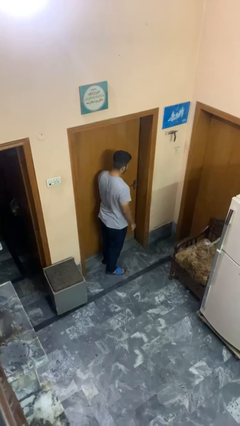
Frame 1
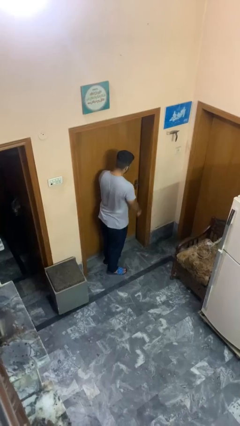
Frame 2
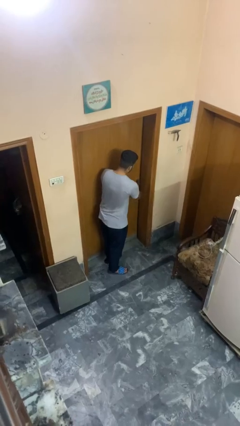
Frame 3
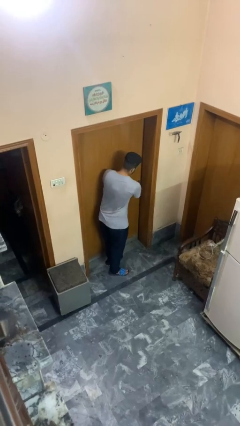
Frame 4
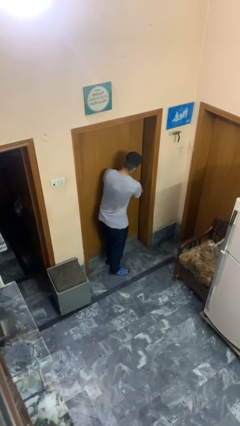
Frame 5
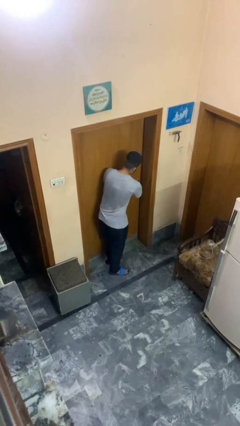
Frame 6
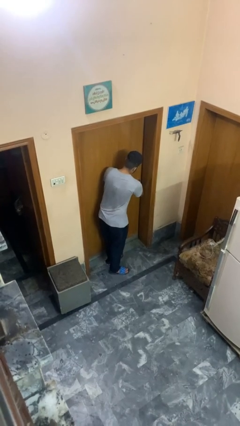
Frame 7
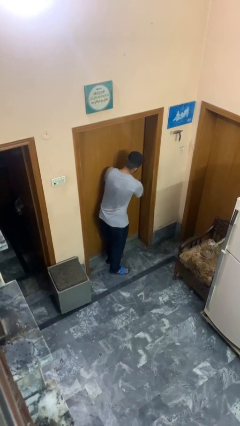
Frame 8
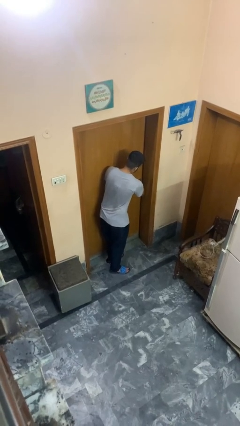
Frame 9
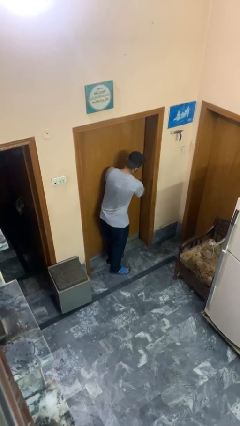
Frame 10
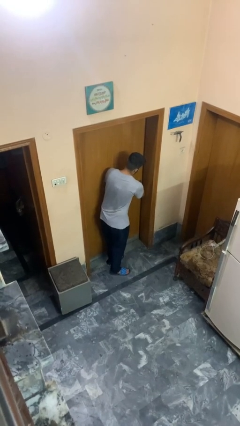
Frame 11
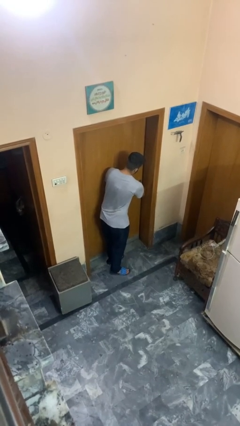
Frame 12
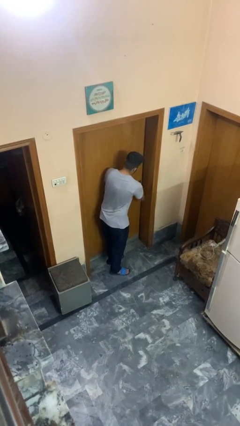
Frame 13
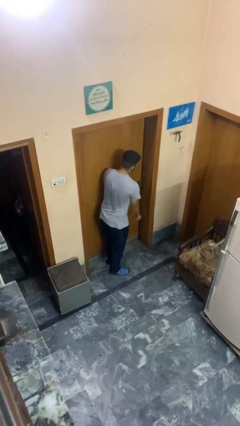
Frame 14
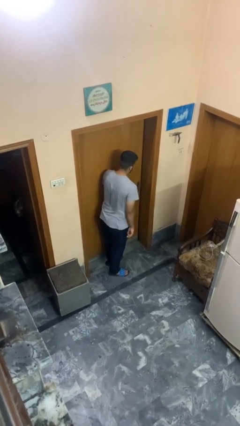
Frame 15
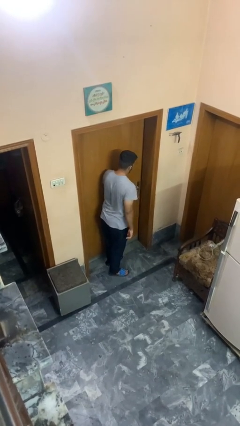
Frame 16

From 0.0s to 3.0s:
person unlocks door with keys

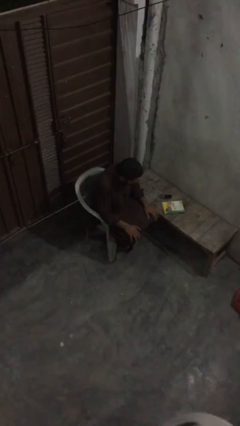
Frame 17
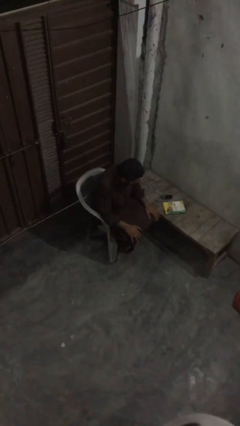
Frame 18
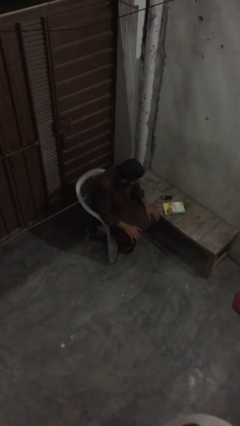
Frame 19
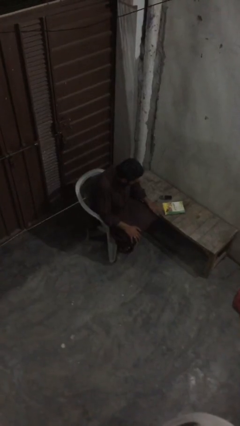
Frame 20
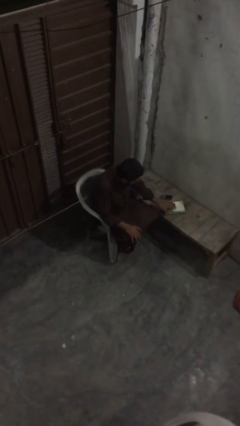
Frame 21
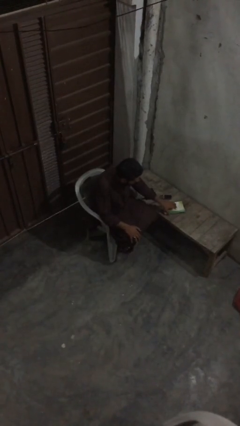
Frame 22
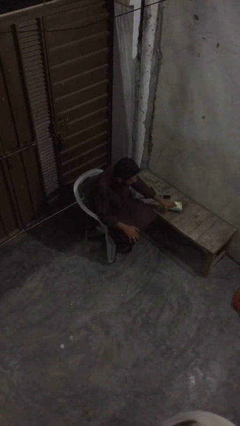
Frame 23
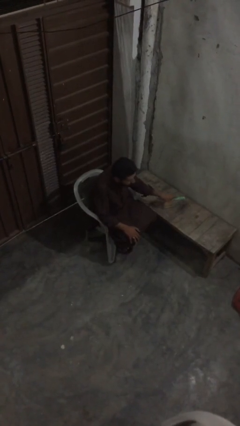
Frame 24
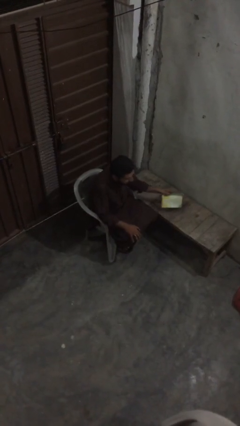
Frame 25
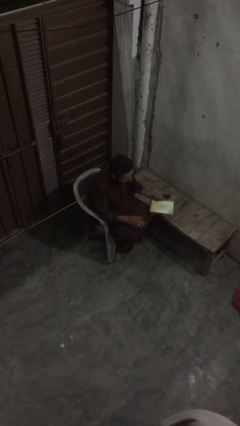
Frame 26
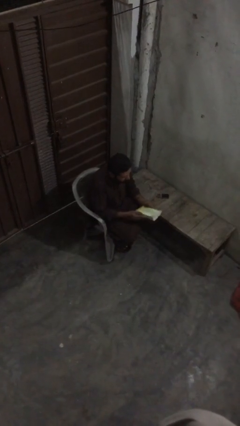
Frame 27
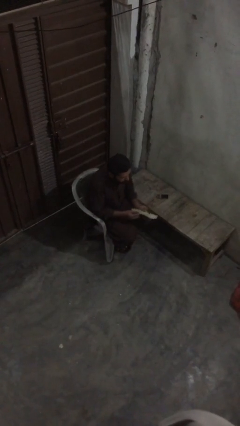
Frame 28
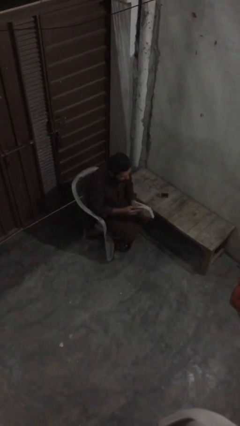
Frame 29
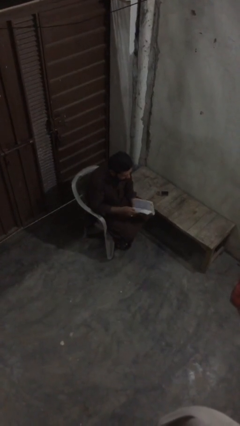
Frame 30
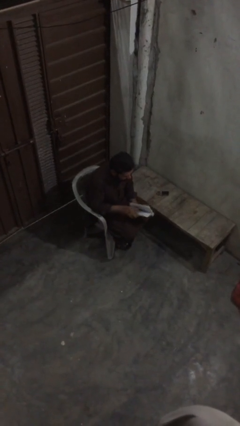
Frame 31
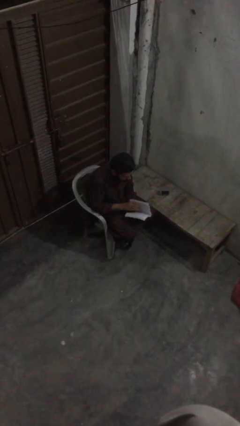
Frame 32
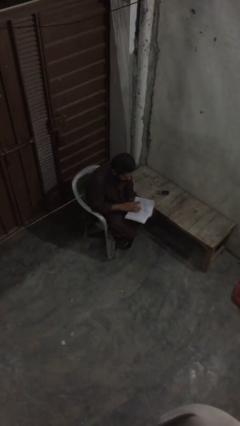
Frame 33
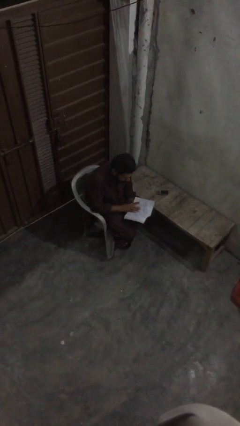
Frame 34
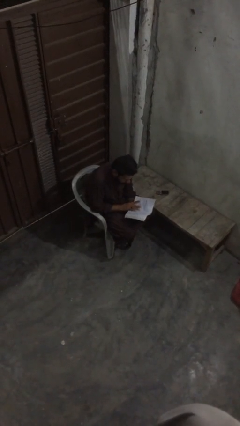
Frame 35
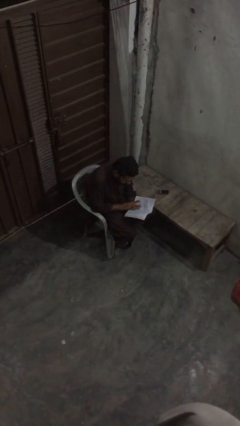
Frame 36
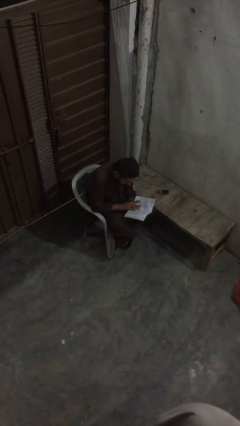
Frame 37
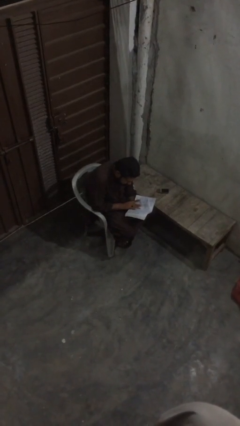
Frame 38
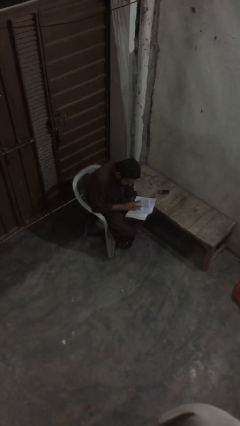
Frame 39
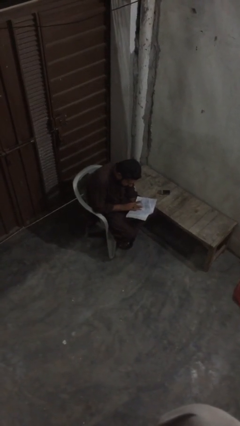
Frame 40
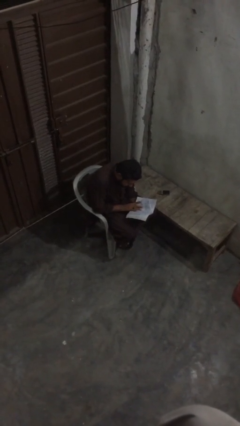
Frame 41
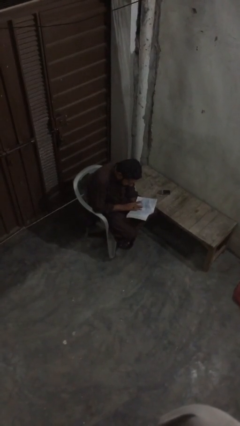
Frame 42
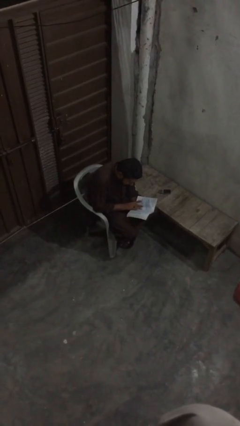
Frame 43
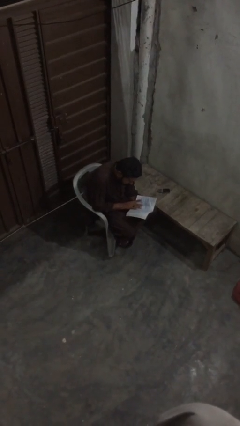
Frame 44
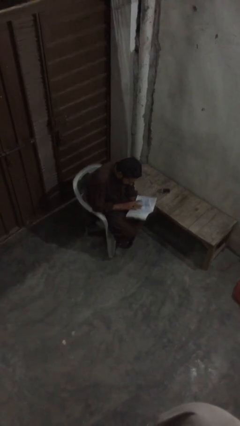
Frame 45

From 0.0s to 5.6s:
person reads document

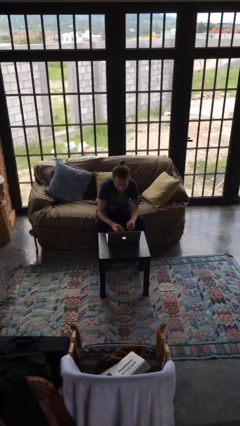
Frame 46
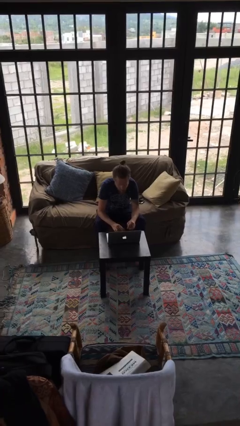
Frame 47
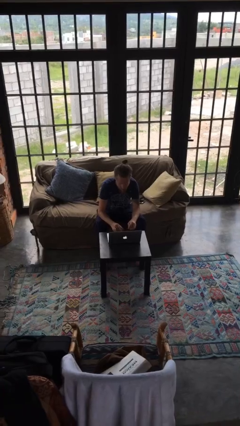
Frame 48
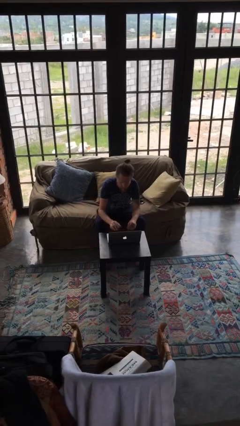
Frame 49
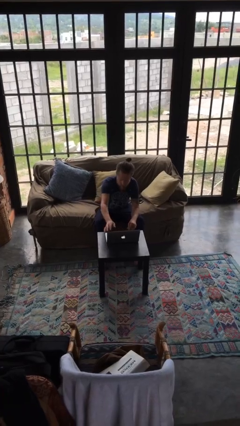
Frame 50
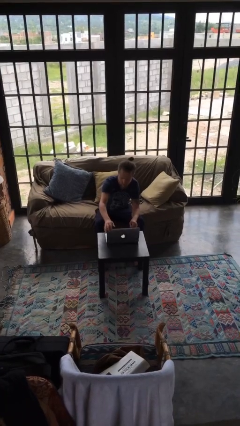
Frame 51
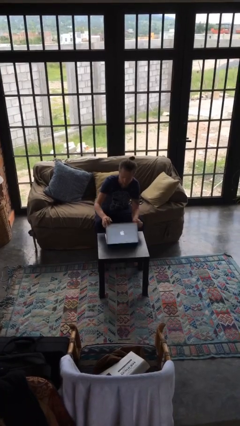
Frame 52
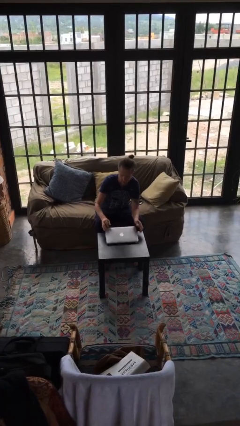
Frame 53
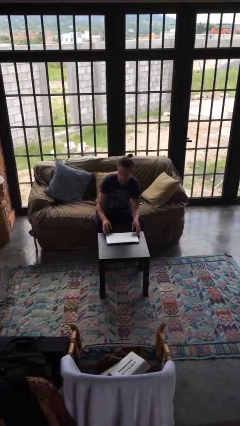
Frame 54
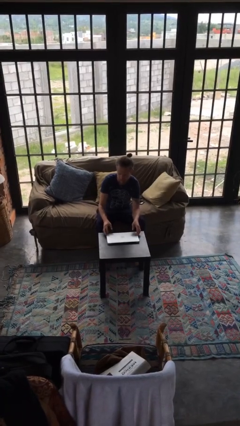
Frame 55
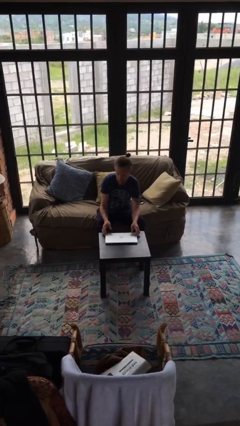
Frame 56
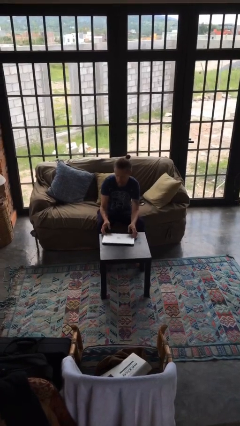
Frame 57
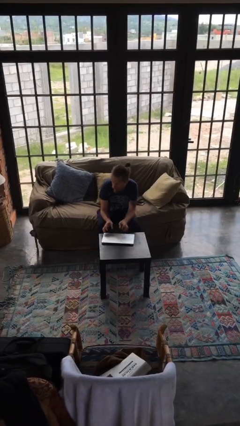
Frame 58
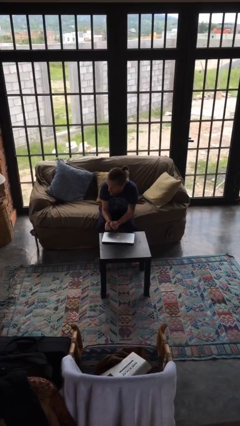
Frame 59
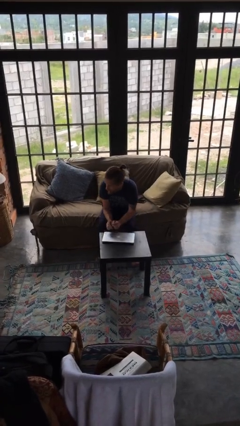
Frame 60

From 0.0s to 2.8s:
person closes laptop

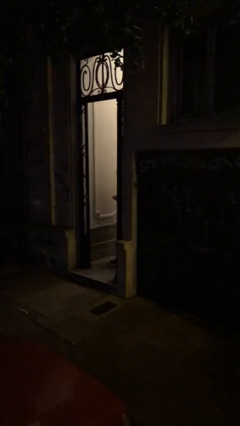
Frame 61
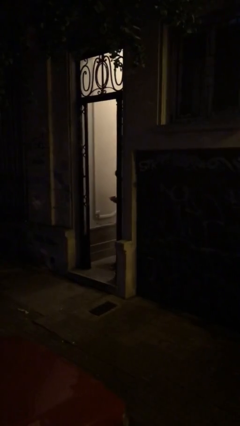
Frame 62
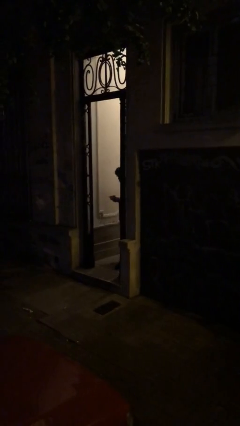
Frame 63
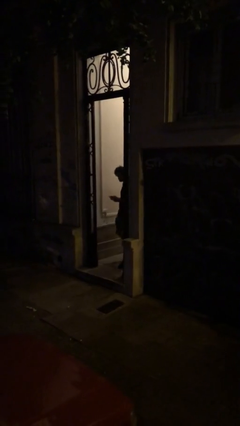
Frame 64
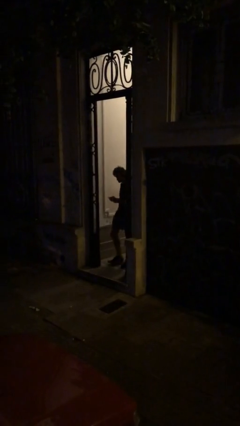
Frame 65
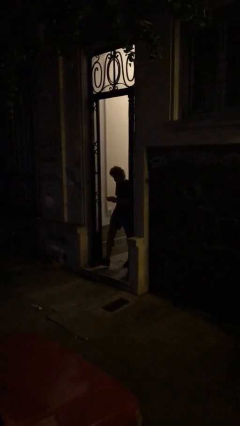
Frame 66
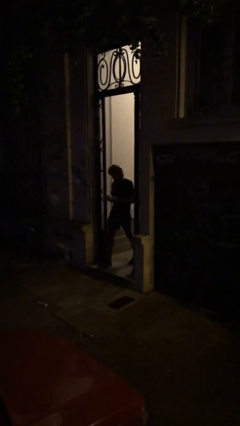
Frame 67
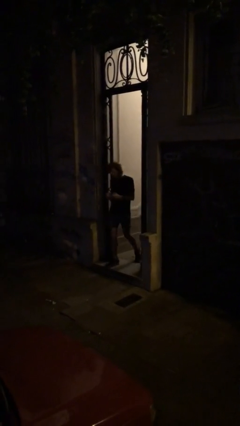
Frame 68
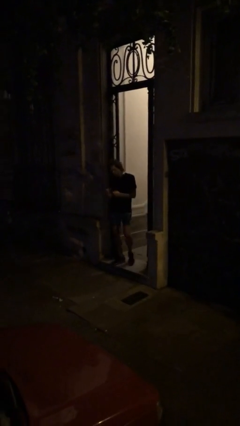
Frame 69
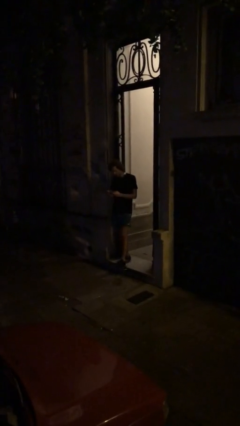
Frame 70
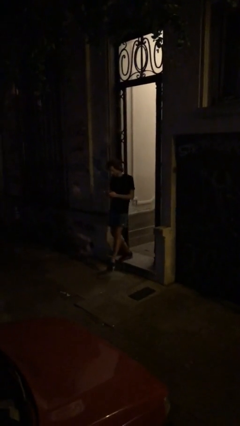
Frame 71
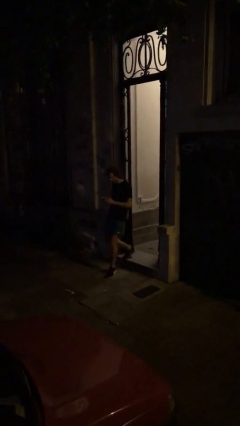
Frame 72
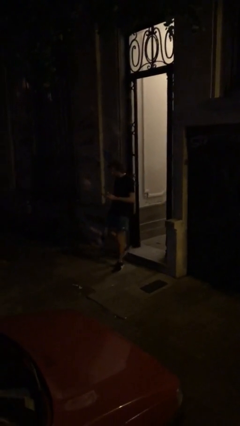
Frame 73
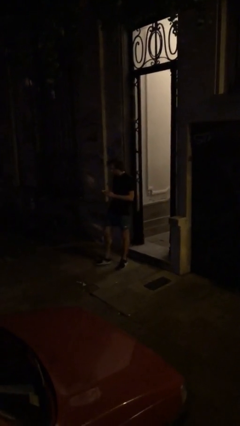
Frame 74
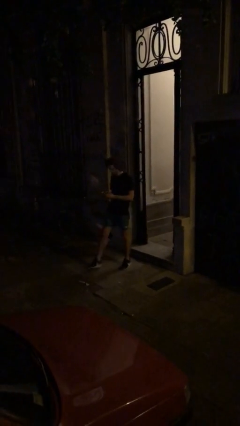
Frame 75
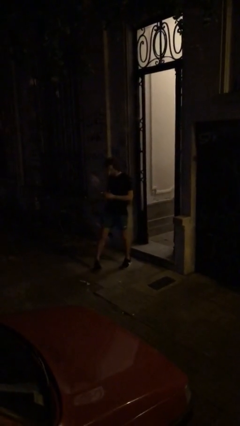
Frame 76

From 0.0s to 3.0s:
person enters scene through structure

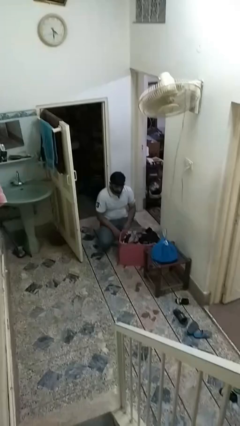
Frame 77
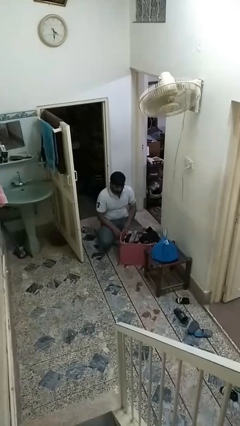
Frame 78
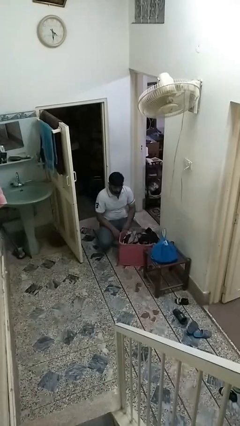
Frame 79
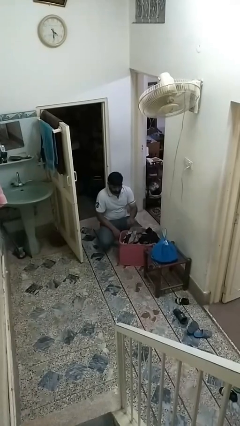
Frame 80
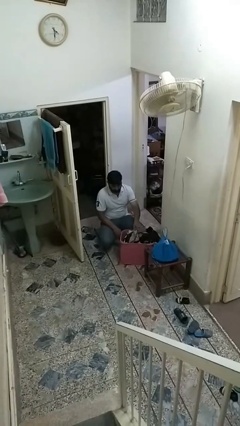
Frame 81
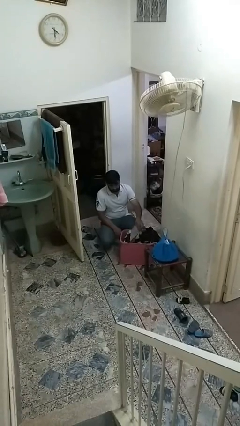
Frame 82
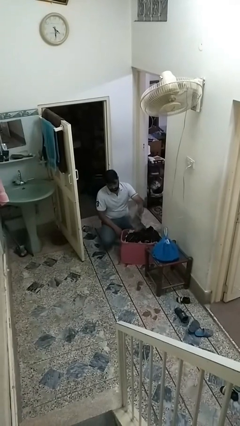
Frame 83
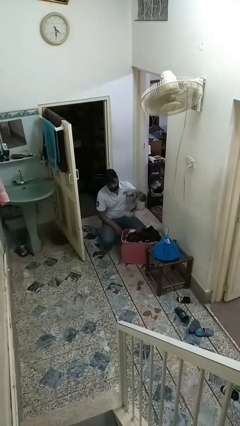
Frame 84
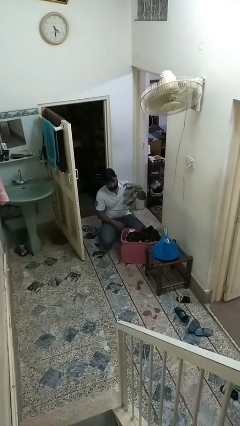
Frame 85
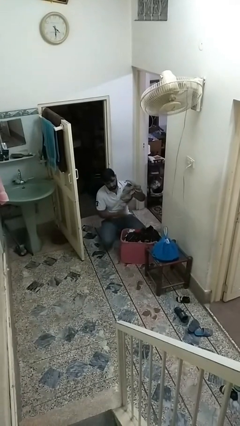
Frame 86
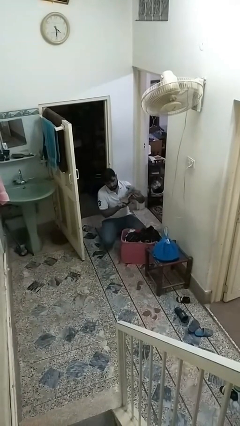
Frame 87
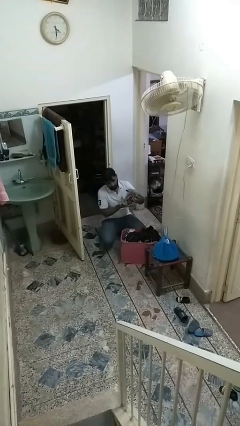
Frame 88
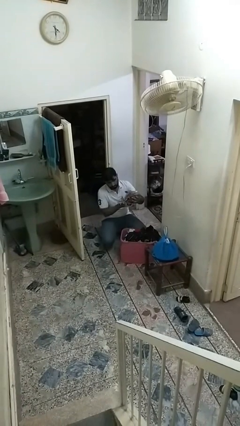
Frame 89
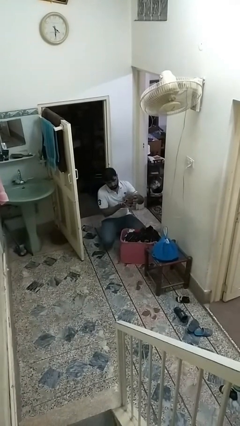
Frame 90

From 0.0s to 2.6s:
person takes object from basket

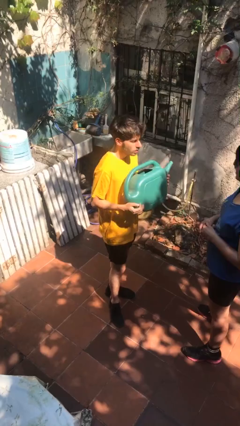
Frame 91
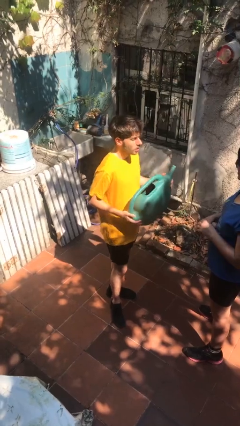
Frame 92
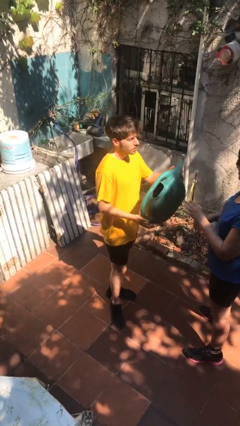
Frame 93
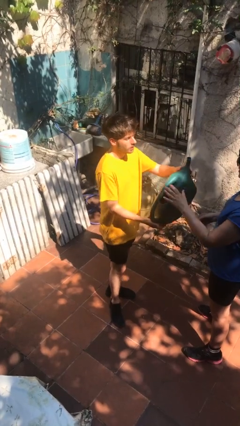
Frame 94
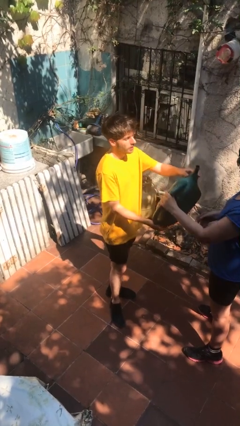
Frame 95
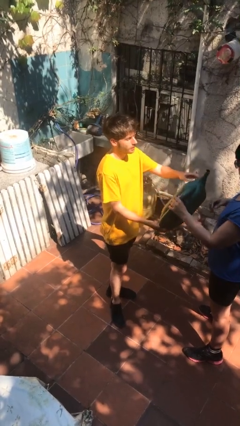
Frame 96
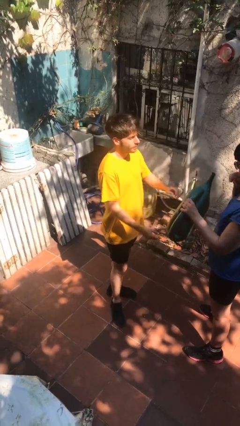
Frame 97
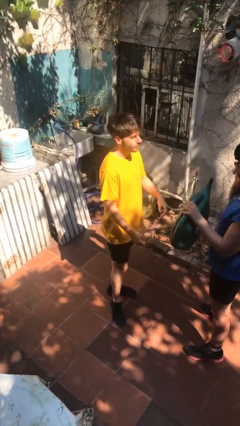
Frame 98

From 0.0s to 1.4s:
person transfers object to person
